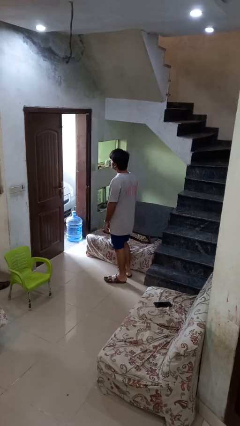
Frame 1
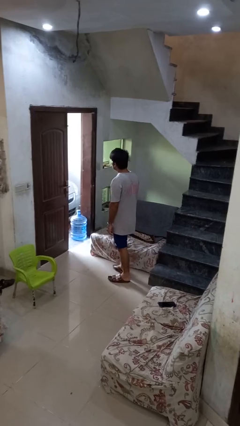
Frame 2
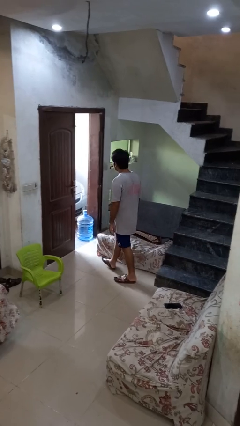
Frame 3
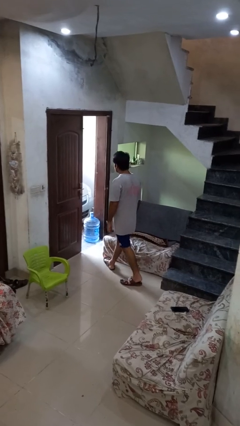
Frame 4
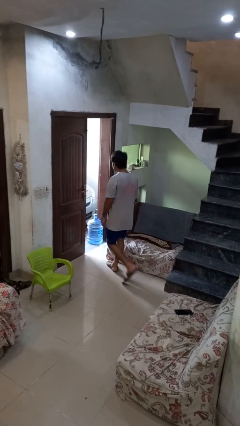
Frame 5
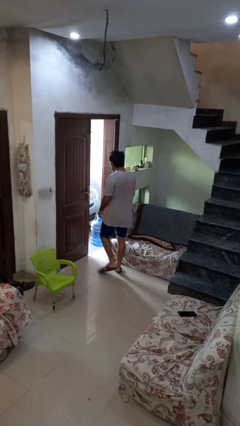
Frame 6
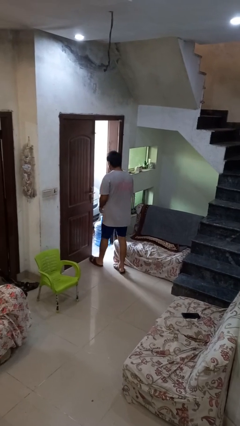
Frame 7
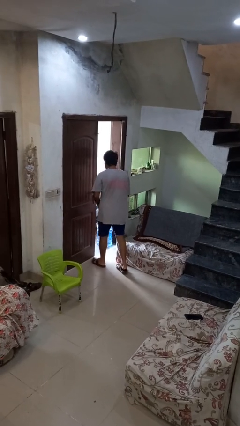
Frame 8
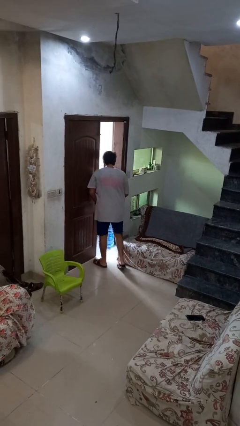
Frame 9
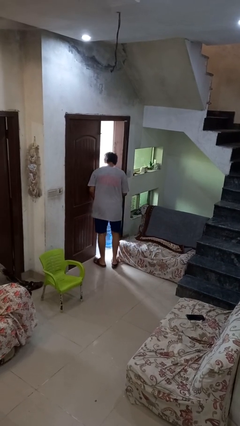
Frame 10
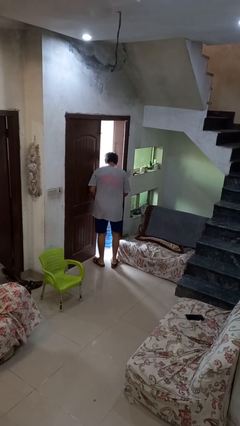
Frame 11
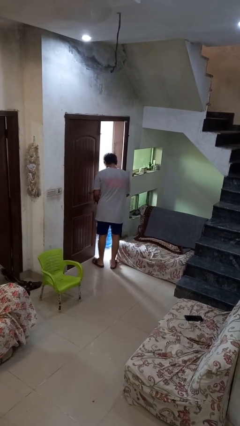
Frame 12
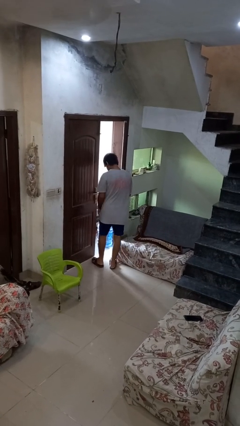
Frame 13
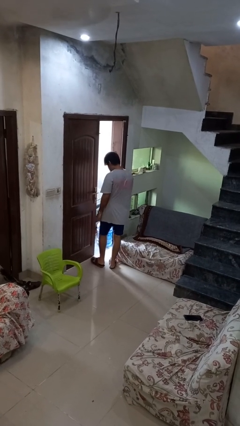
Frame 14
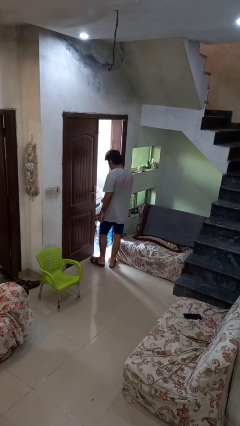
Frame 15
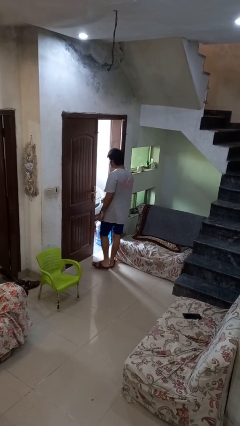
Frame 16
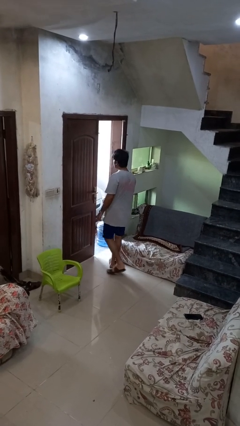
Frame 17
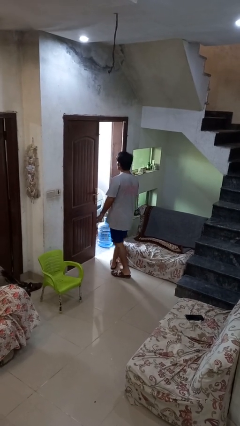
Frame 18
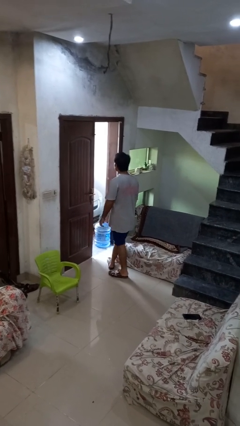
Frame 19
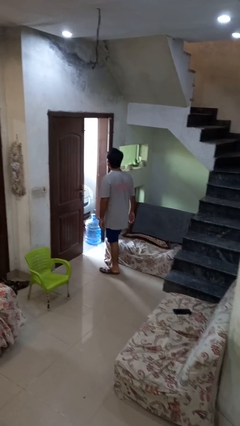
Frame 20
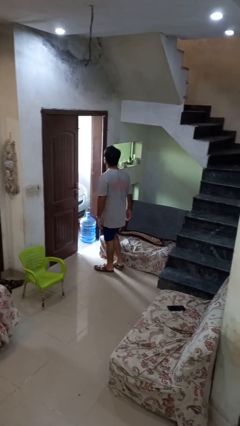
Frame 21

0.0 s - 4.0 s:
person bumps into wall

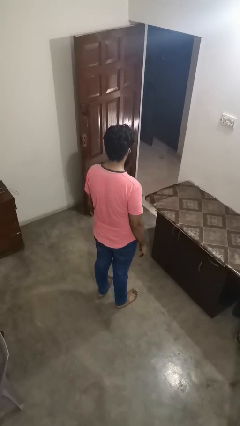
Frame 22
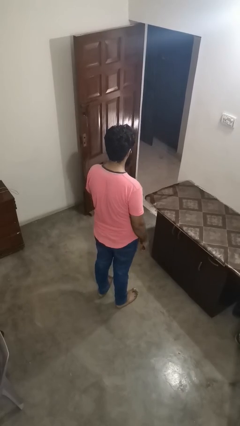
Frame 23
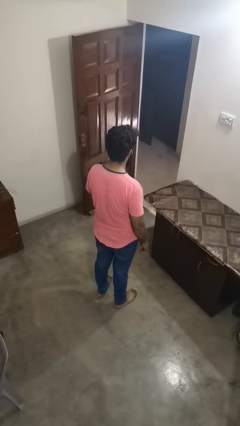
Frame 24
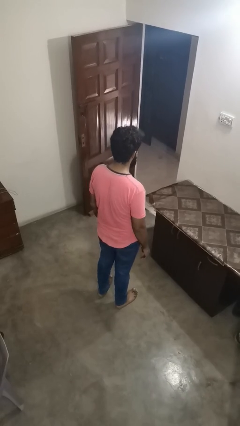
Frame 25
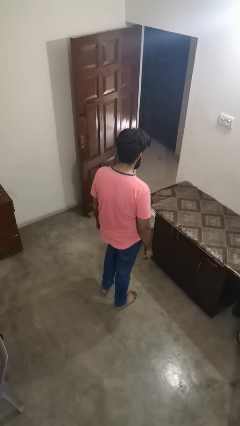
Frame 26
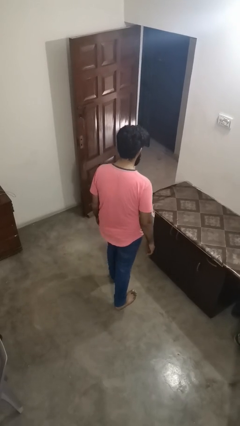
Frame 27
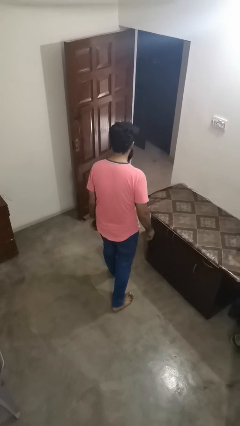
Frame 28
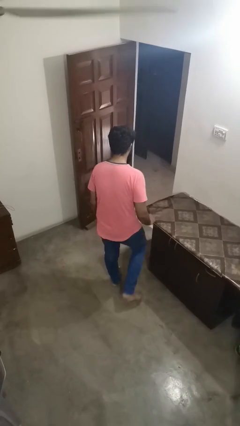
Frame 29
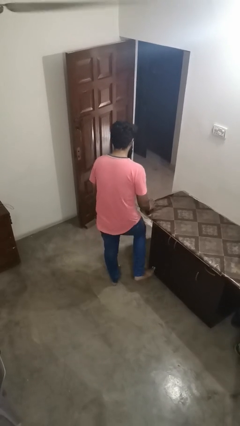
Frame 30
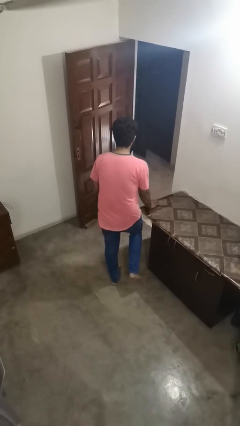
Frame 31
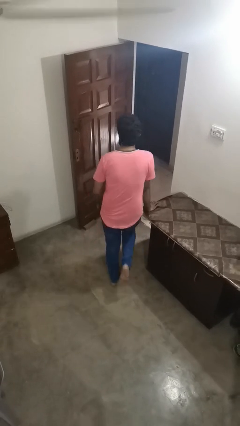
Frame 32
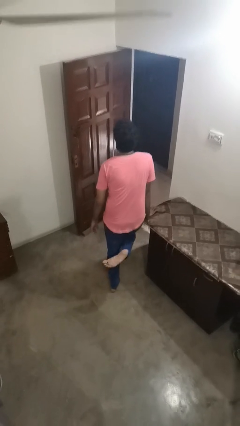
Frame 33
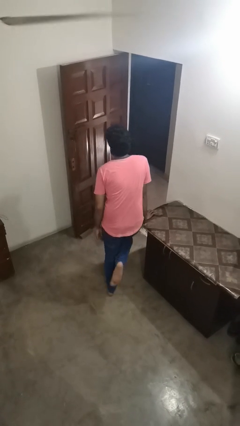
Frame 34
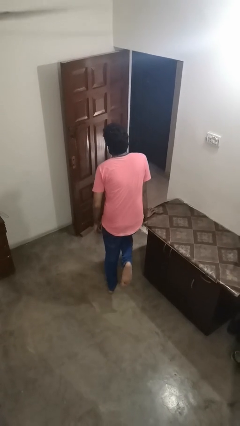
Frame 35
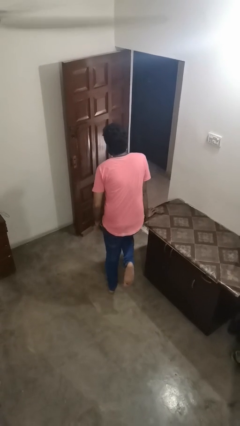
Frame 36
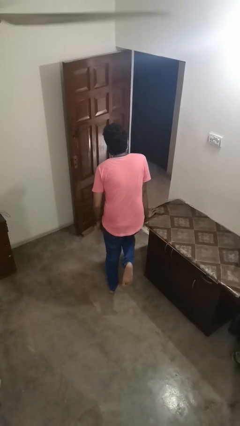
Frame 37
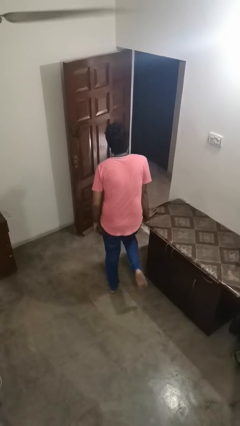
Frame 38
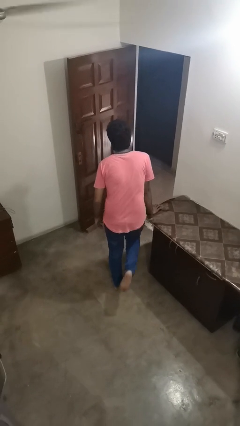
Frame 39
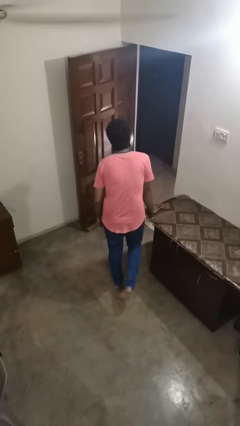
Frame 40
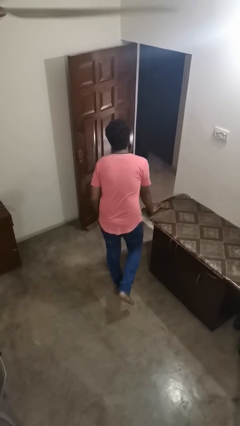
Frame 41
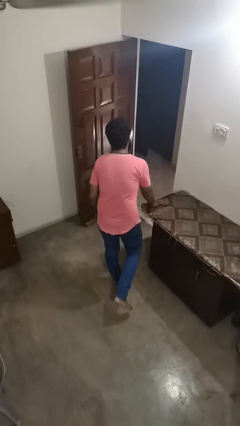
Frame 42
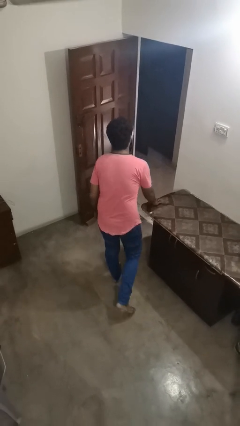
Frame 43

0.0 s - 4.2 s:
person bumps into table

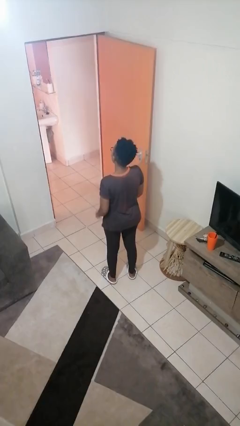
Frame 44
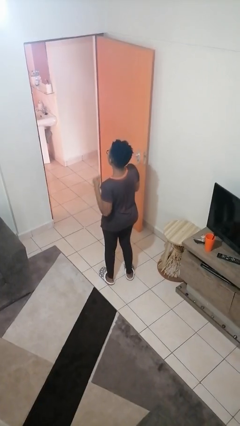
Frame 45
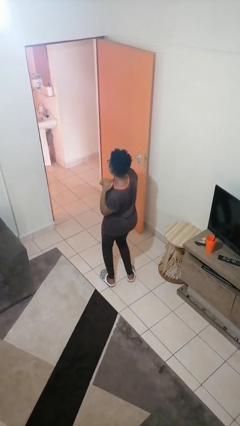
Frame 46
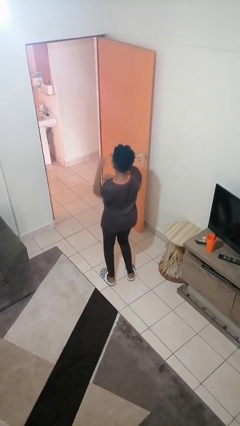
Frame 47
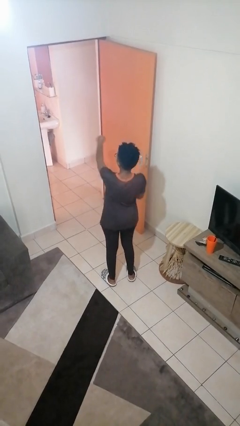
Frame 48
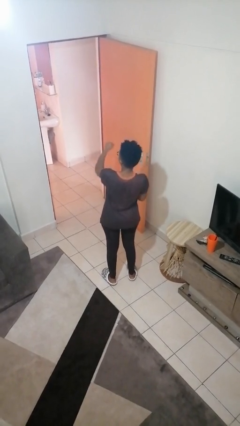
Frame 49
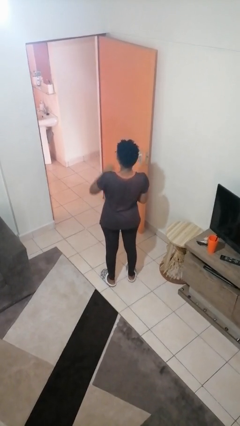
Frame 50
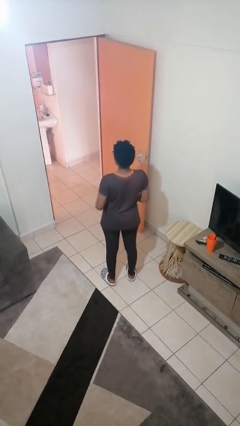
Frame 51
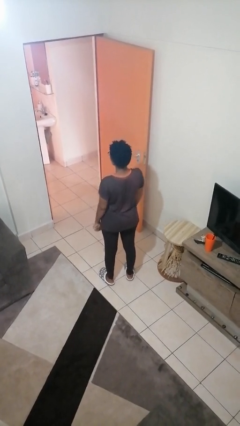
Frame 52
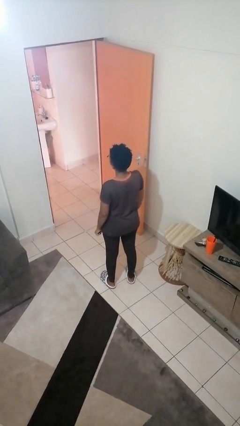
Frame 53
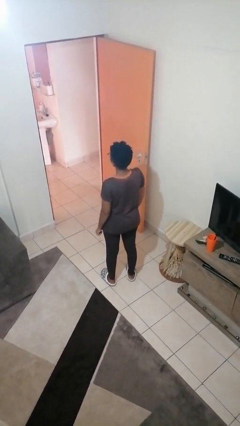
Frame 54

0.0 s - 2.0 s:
person punches

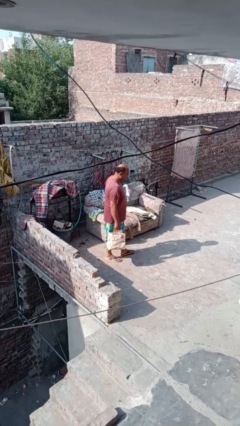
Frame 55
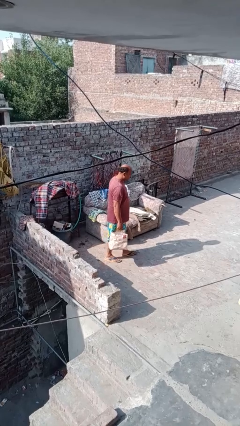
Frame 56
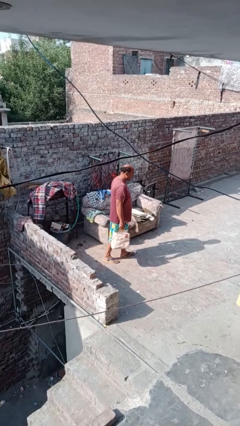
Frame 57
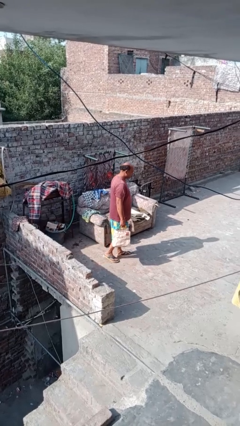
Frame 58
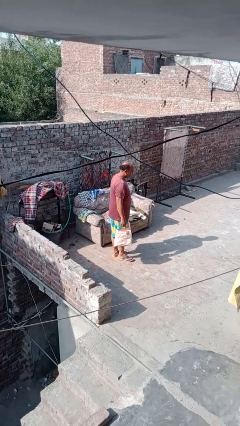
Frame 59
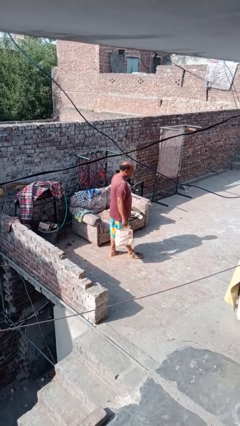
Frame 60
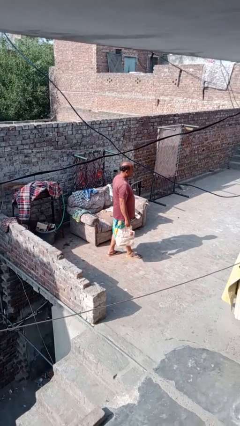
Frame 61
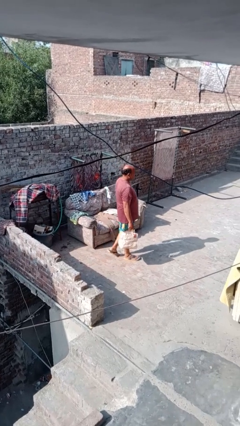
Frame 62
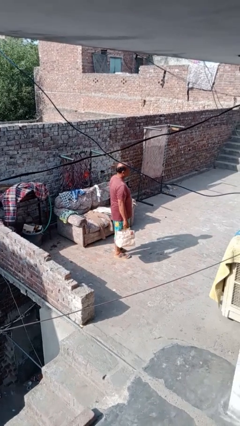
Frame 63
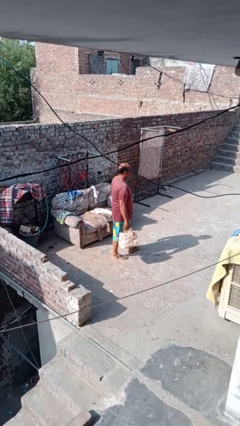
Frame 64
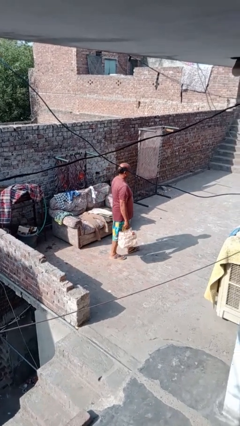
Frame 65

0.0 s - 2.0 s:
person carries groceries

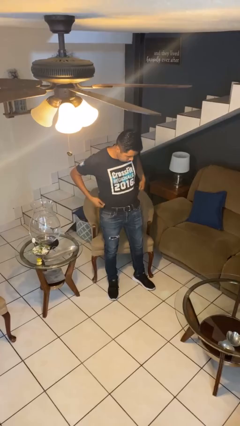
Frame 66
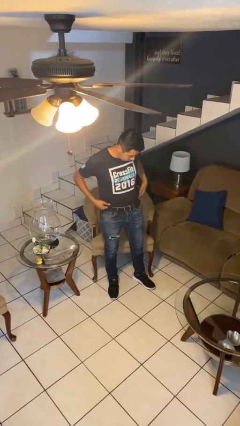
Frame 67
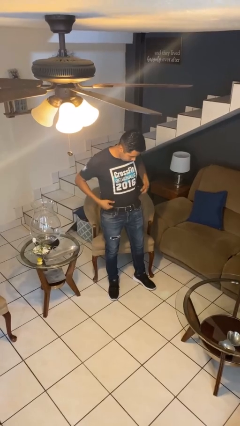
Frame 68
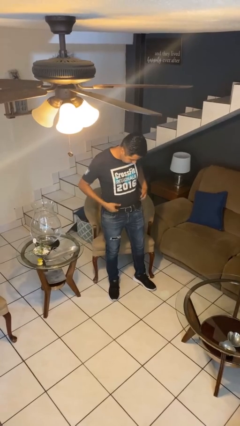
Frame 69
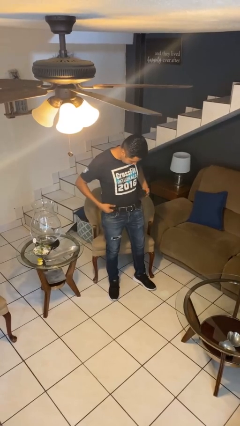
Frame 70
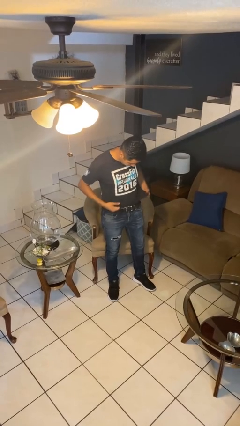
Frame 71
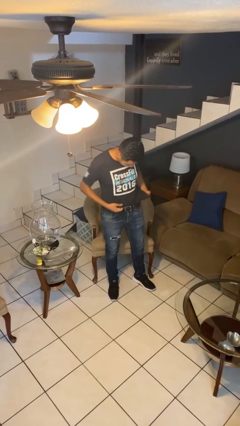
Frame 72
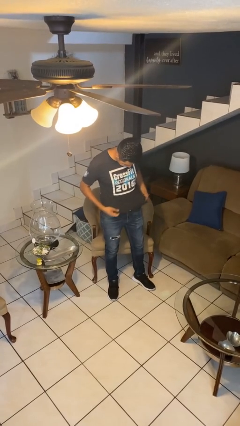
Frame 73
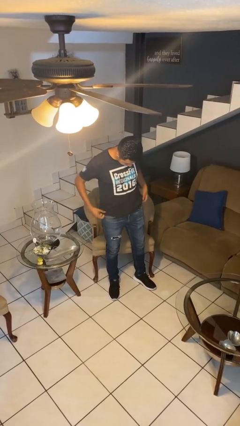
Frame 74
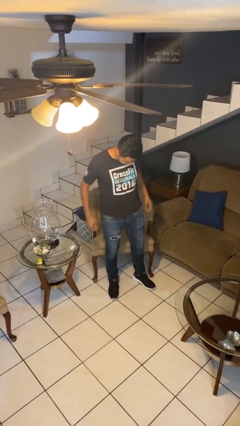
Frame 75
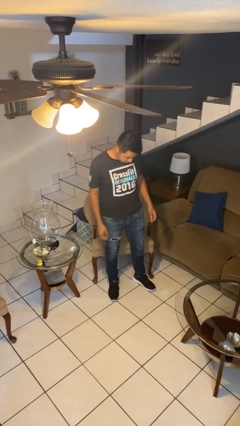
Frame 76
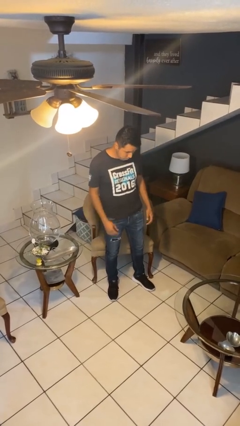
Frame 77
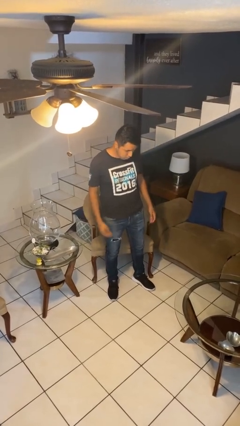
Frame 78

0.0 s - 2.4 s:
person untucks shirt

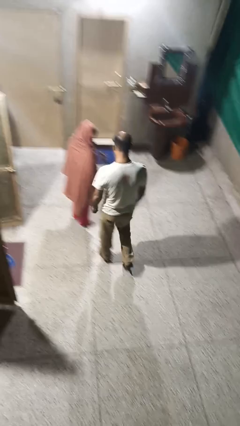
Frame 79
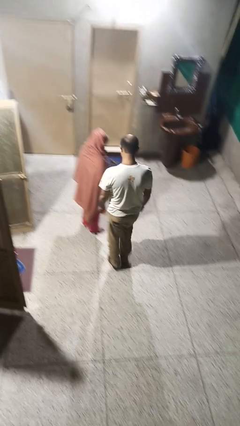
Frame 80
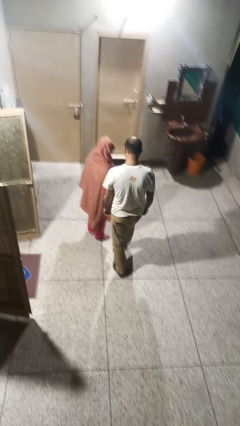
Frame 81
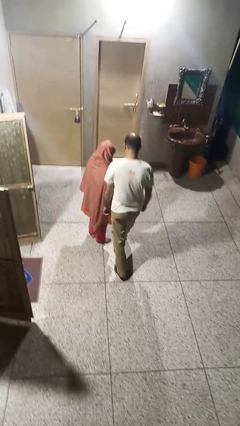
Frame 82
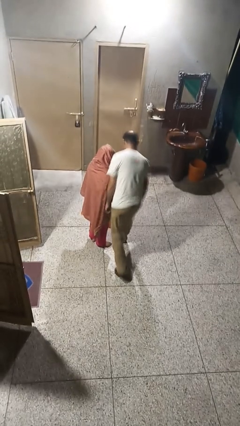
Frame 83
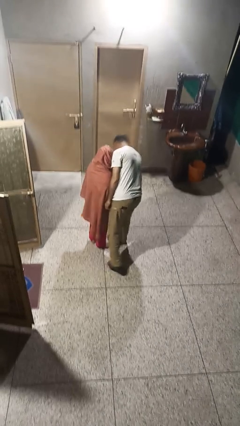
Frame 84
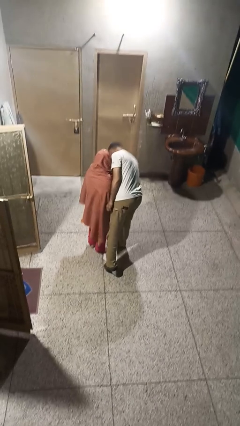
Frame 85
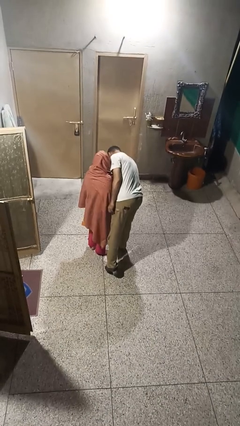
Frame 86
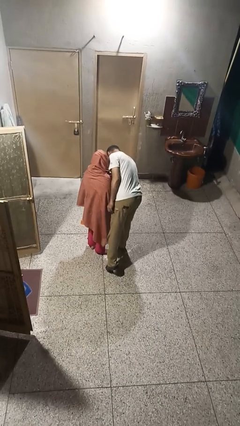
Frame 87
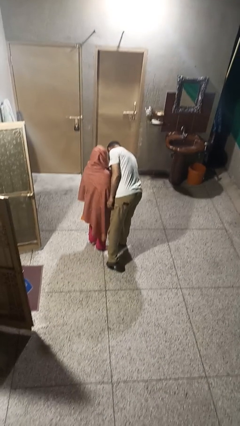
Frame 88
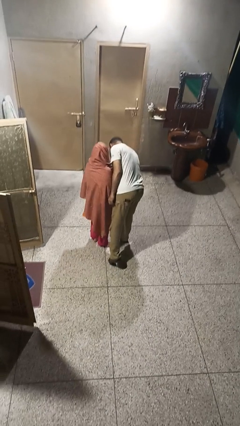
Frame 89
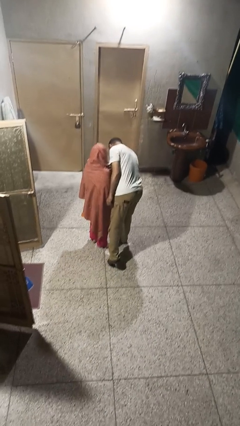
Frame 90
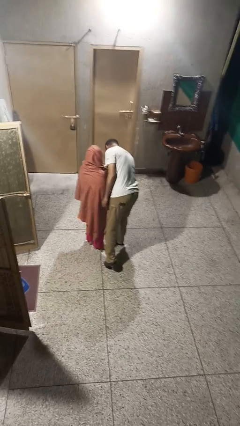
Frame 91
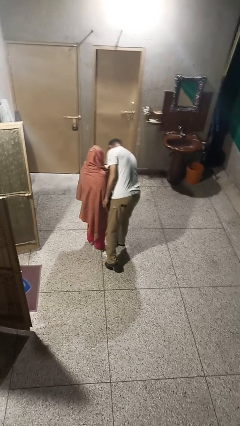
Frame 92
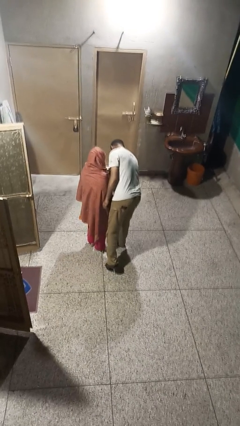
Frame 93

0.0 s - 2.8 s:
person bumps into person
